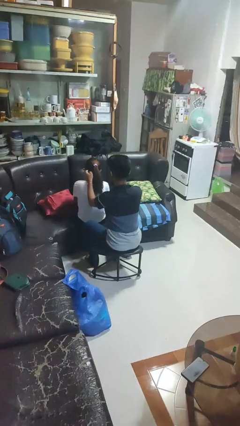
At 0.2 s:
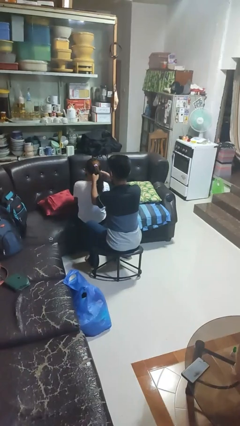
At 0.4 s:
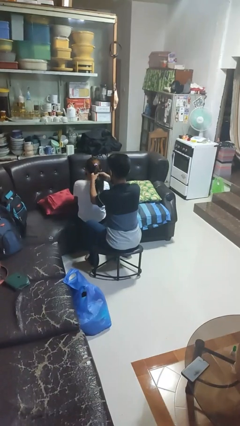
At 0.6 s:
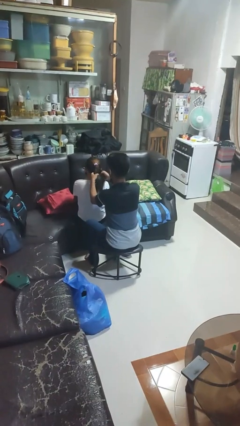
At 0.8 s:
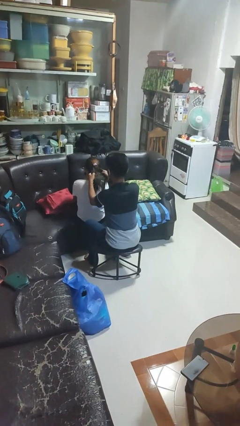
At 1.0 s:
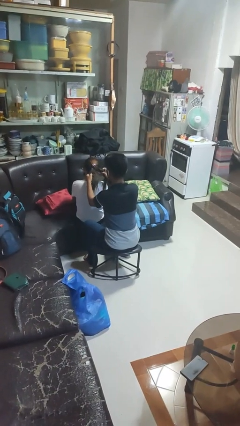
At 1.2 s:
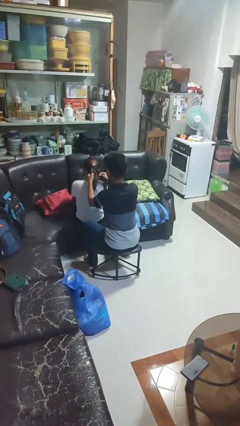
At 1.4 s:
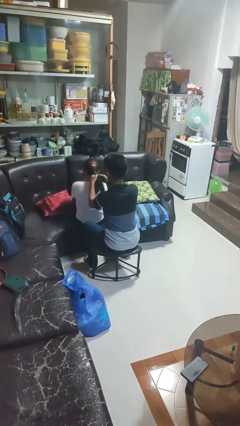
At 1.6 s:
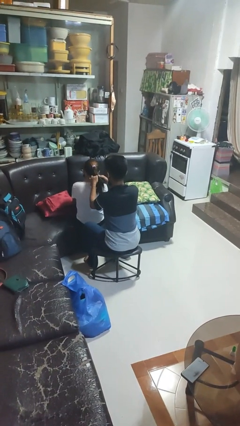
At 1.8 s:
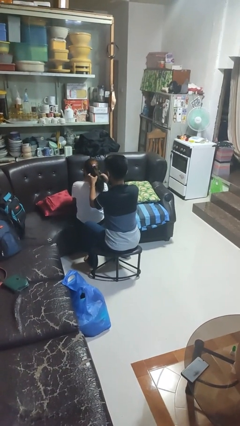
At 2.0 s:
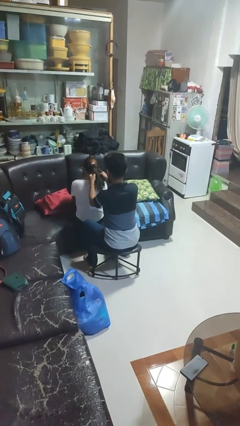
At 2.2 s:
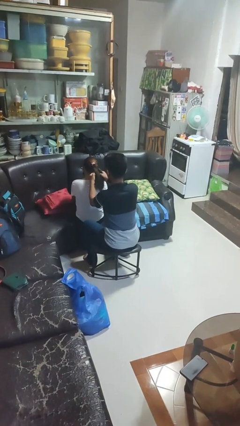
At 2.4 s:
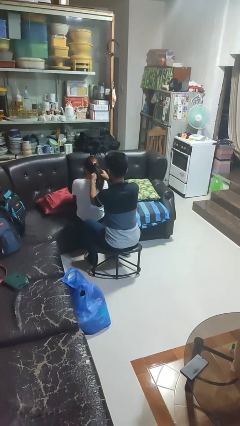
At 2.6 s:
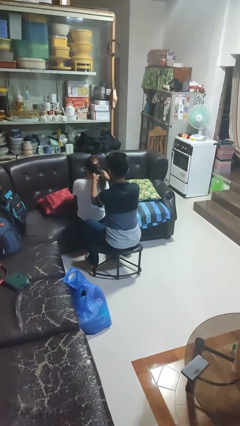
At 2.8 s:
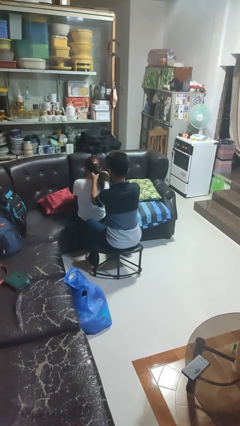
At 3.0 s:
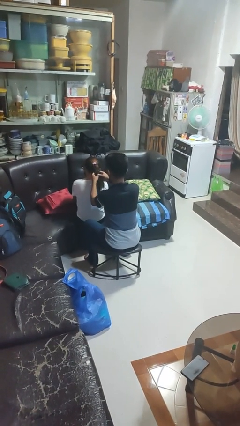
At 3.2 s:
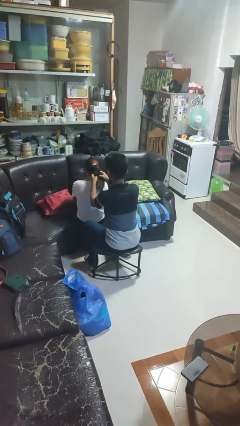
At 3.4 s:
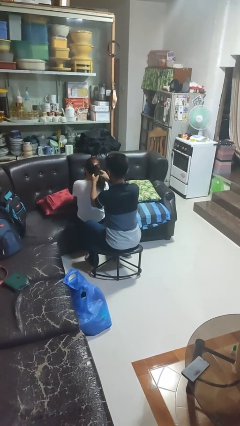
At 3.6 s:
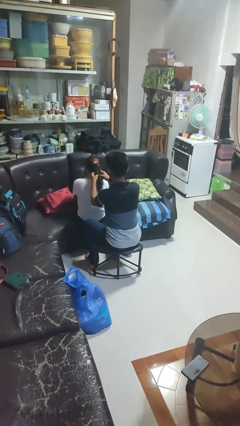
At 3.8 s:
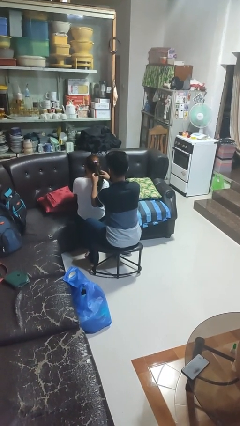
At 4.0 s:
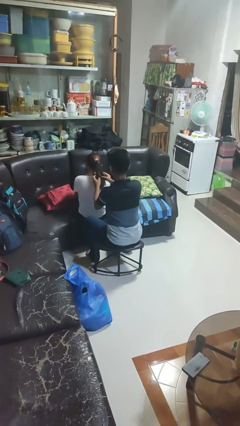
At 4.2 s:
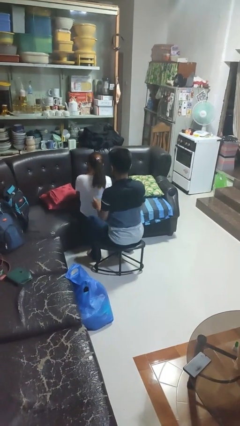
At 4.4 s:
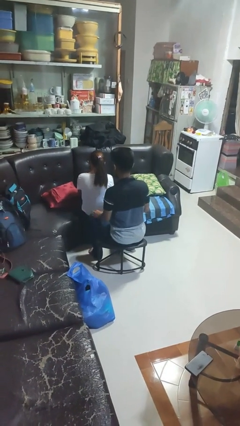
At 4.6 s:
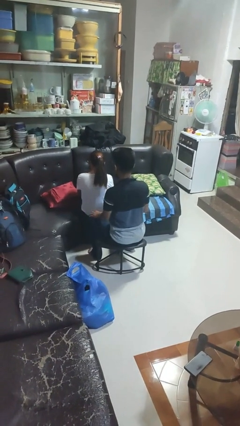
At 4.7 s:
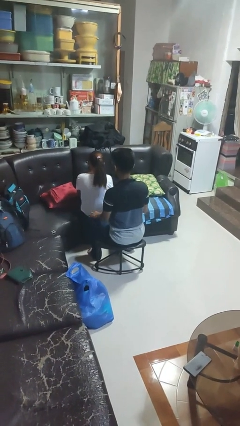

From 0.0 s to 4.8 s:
person braids hair of person

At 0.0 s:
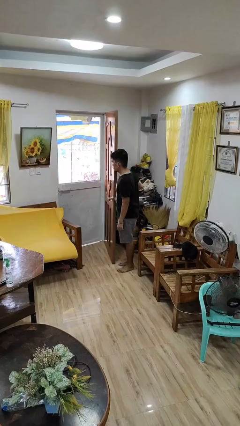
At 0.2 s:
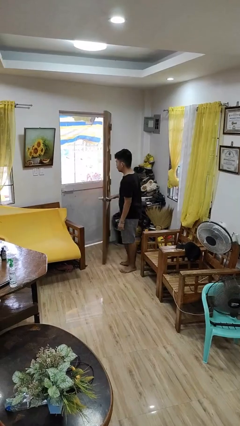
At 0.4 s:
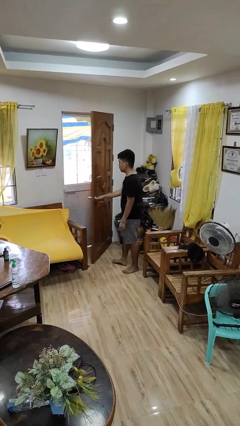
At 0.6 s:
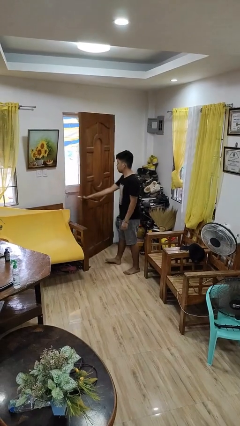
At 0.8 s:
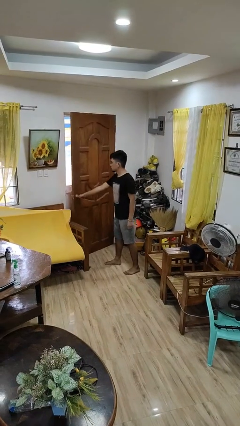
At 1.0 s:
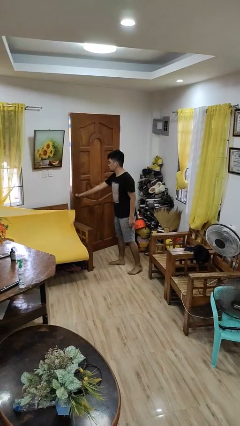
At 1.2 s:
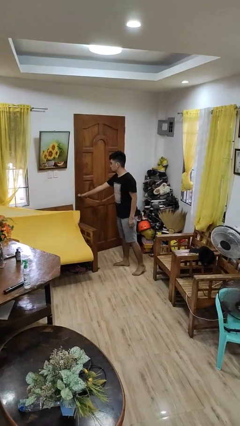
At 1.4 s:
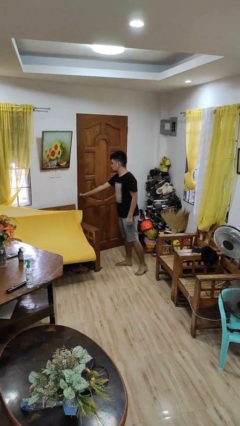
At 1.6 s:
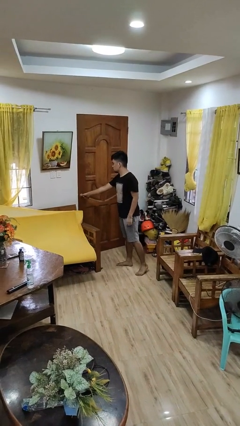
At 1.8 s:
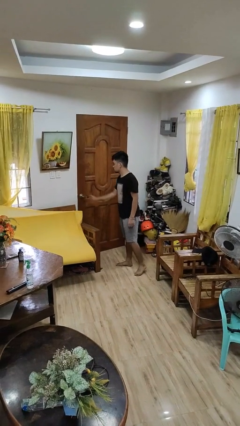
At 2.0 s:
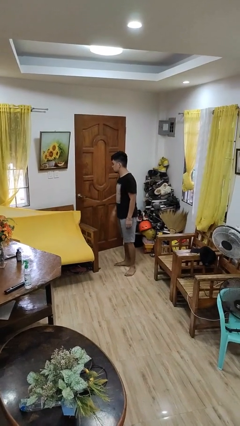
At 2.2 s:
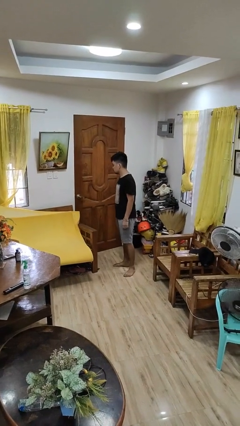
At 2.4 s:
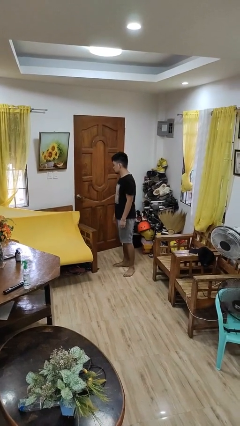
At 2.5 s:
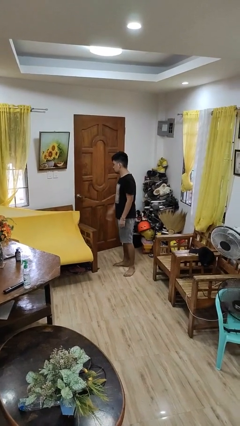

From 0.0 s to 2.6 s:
person closes facility door

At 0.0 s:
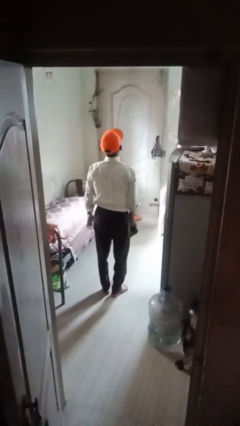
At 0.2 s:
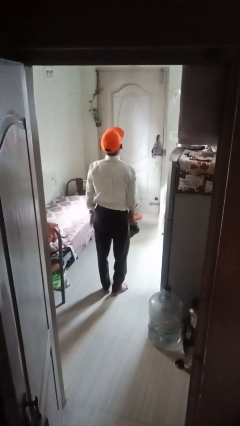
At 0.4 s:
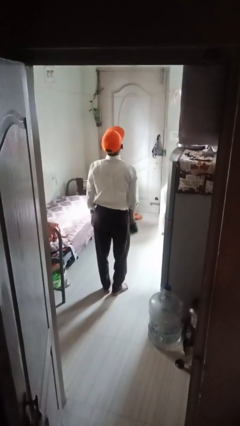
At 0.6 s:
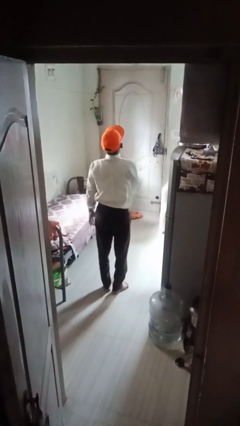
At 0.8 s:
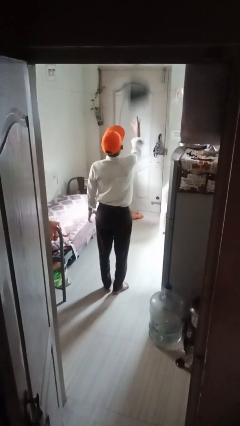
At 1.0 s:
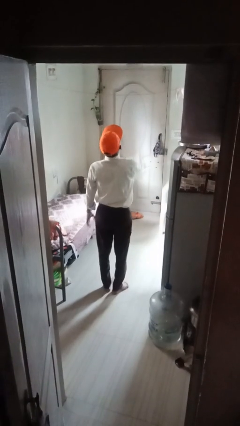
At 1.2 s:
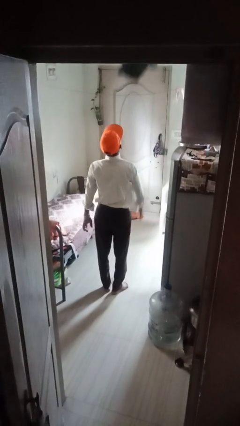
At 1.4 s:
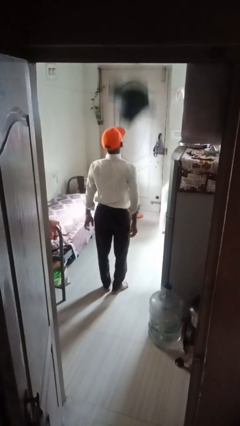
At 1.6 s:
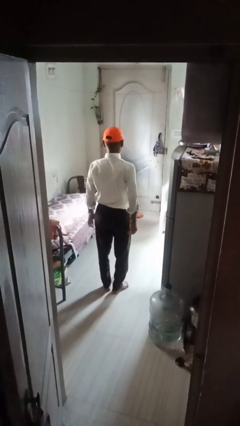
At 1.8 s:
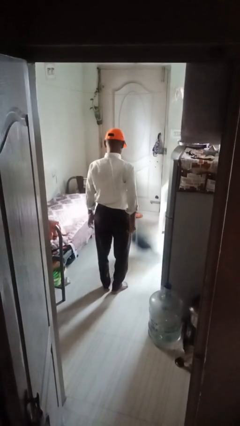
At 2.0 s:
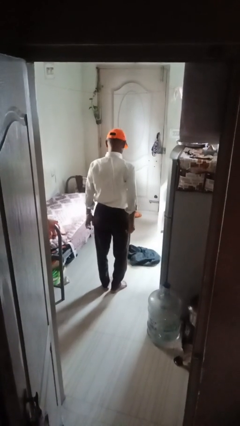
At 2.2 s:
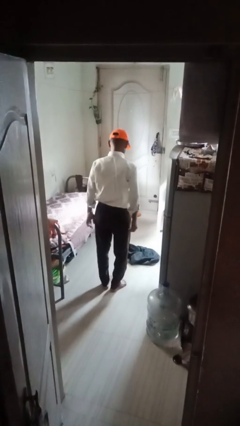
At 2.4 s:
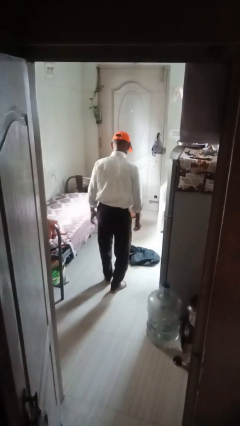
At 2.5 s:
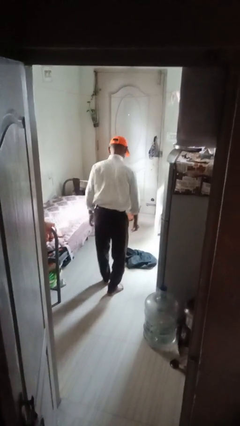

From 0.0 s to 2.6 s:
person throws object into air

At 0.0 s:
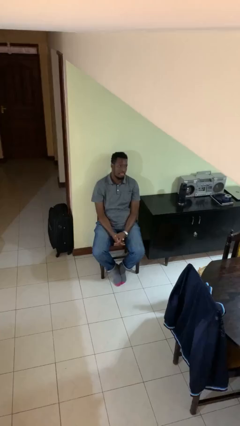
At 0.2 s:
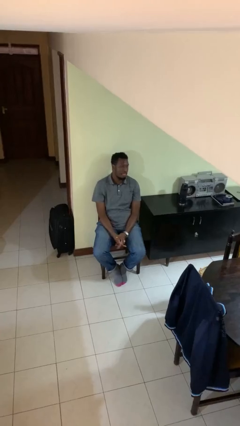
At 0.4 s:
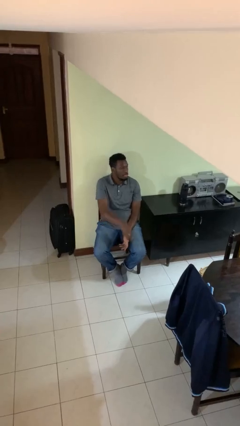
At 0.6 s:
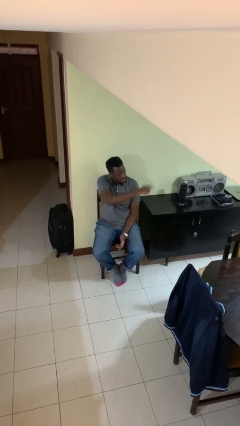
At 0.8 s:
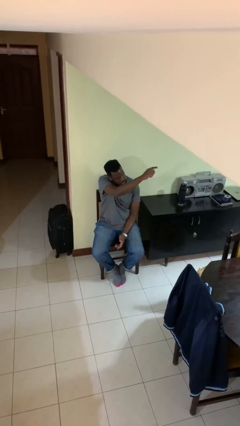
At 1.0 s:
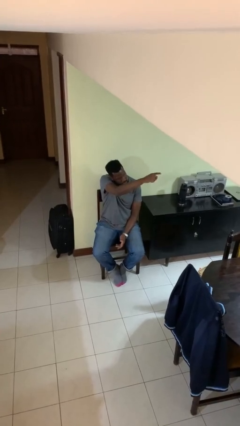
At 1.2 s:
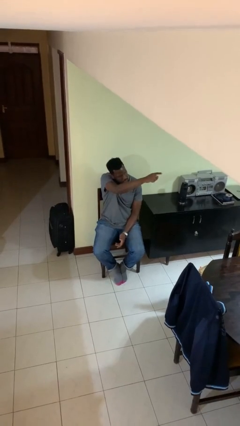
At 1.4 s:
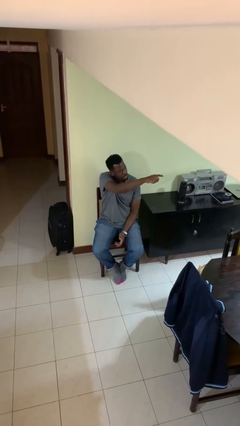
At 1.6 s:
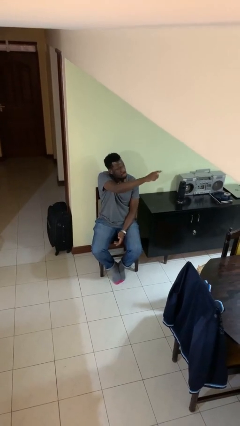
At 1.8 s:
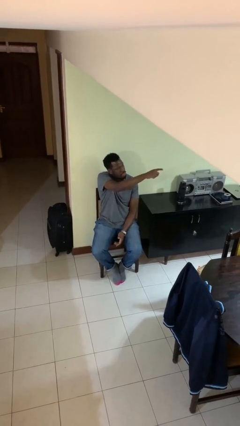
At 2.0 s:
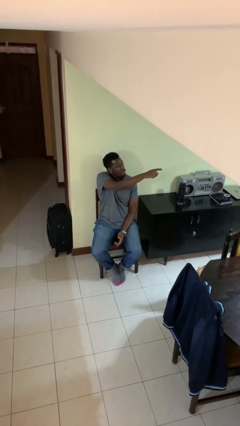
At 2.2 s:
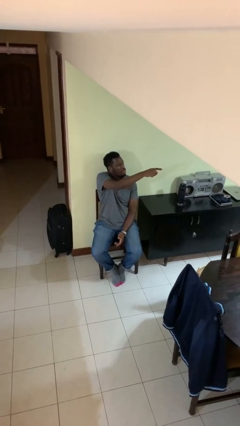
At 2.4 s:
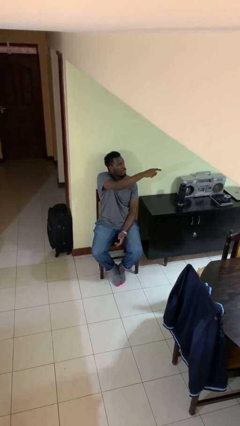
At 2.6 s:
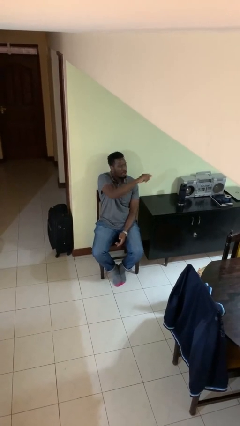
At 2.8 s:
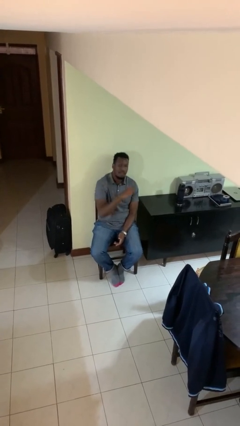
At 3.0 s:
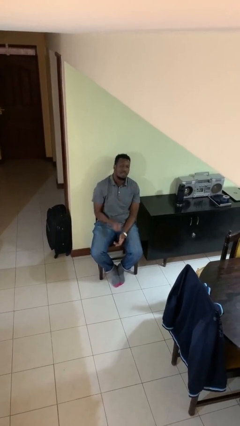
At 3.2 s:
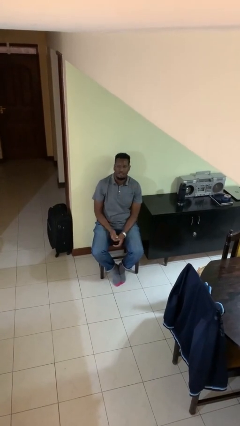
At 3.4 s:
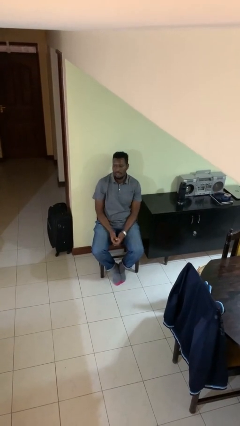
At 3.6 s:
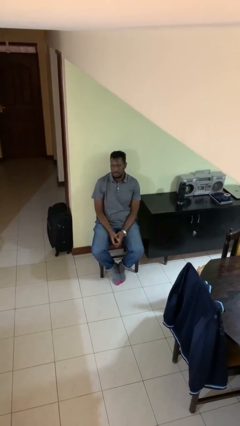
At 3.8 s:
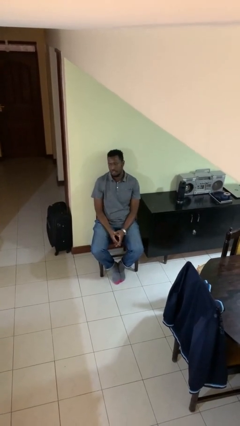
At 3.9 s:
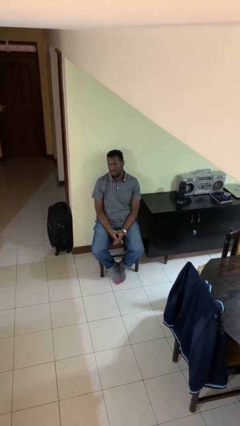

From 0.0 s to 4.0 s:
person points at person

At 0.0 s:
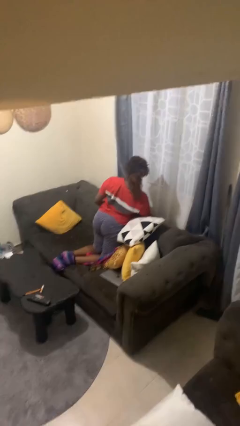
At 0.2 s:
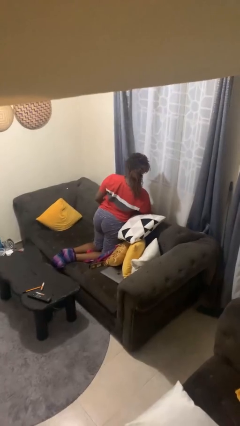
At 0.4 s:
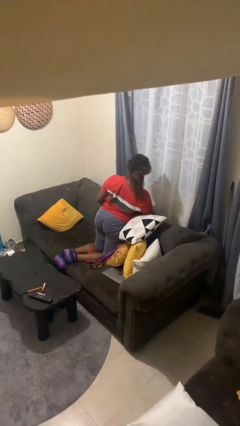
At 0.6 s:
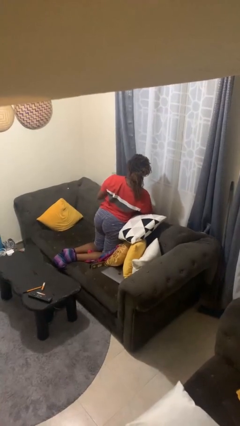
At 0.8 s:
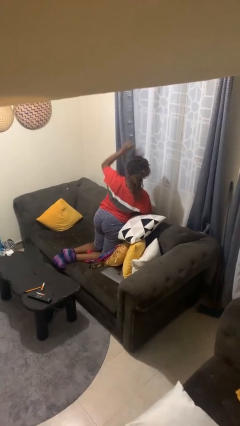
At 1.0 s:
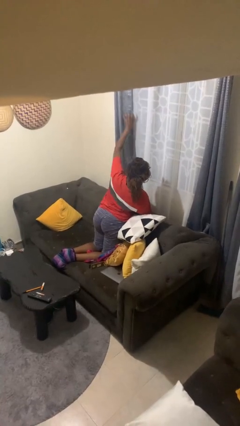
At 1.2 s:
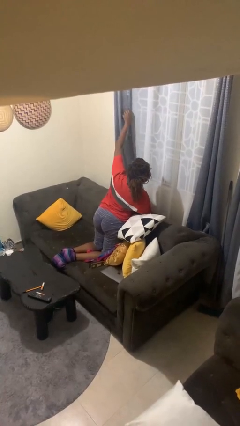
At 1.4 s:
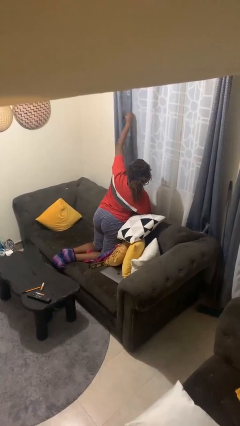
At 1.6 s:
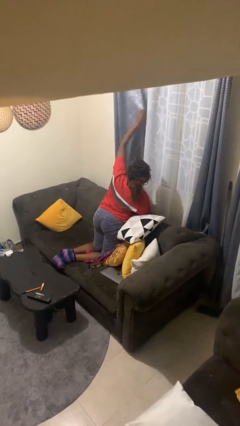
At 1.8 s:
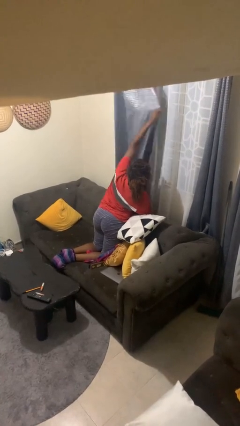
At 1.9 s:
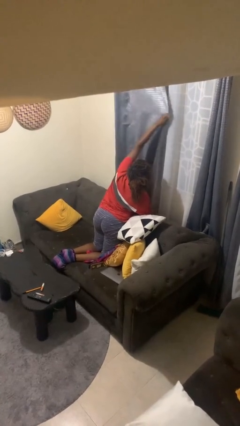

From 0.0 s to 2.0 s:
person closes curtains

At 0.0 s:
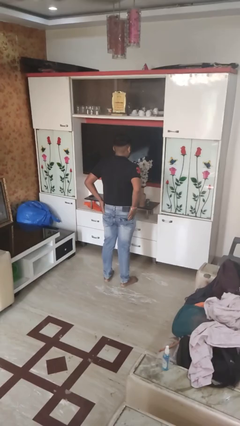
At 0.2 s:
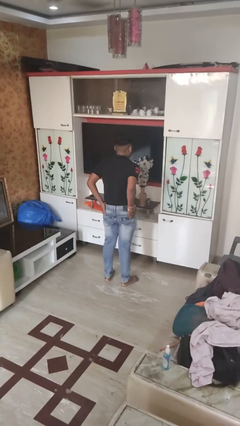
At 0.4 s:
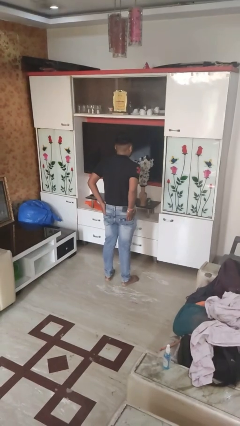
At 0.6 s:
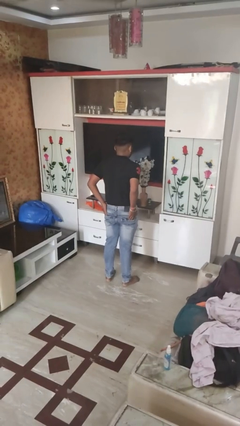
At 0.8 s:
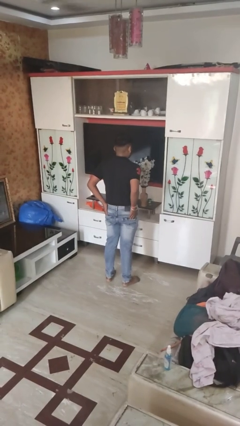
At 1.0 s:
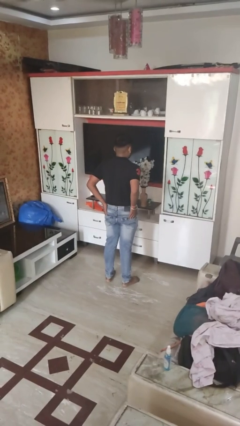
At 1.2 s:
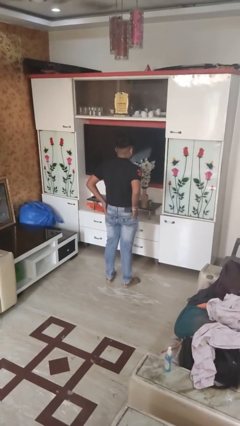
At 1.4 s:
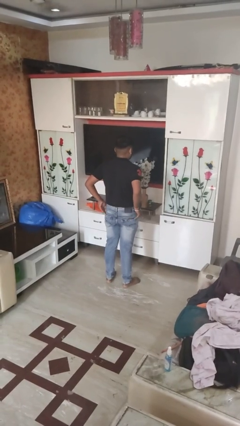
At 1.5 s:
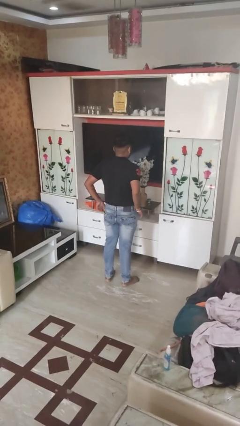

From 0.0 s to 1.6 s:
person puts hands in back pockets
